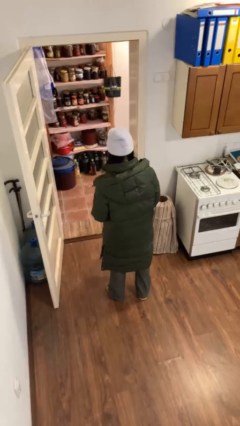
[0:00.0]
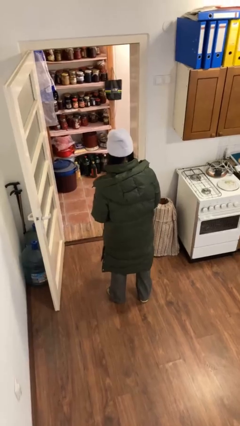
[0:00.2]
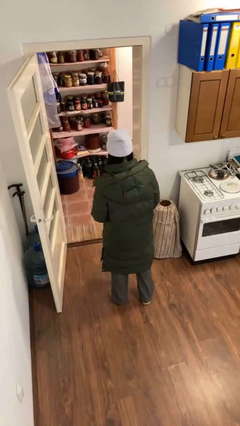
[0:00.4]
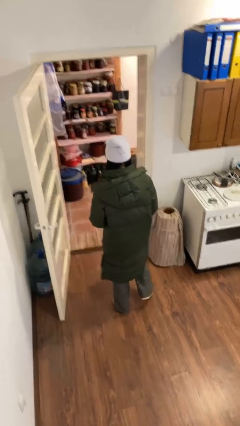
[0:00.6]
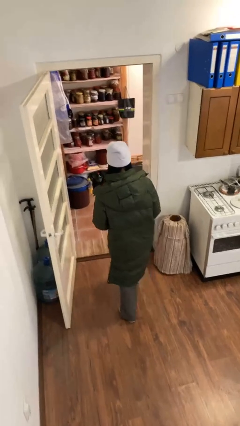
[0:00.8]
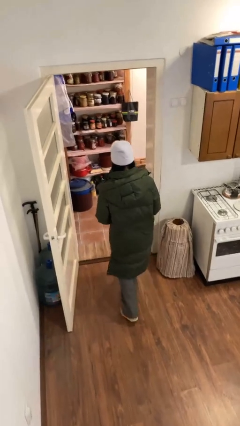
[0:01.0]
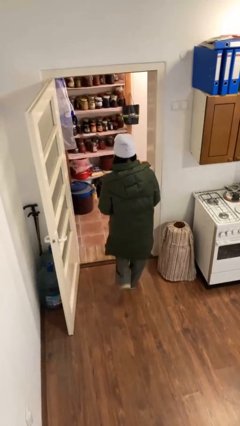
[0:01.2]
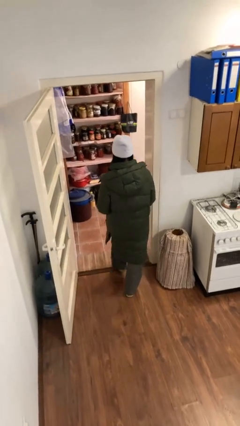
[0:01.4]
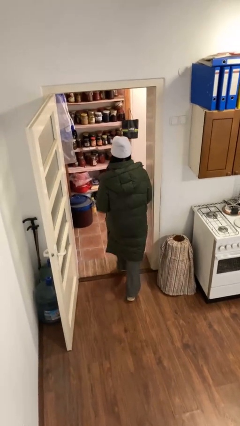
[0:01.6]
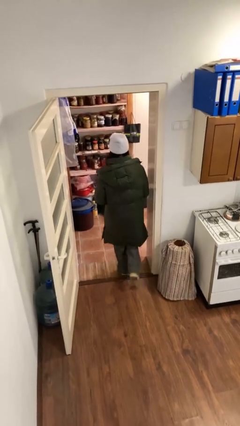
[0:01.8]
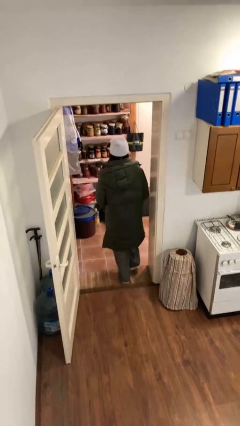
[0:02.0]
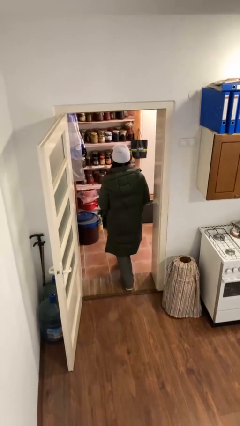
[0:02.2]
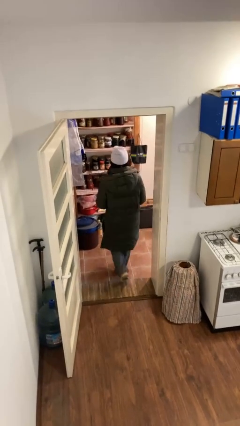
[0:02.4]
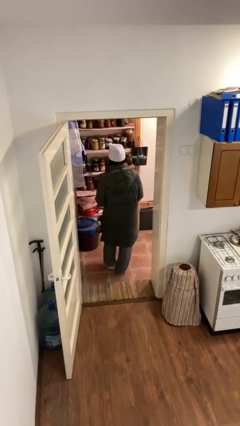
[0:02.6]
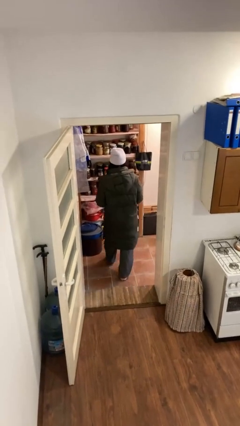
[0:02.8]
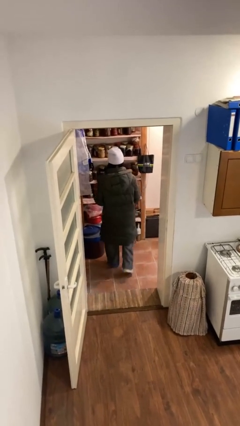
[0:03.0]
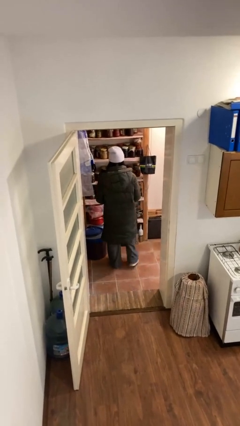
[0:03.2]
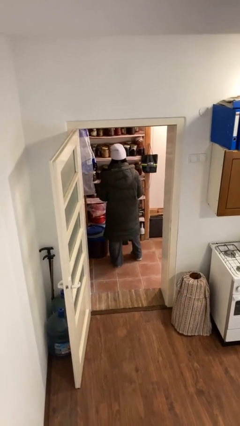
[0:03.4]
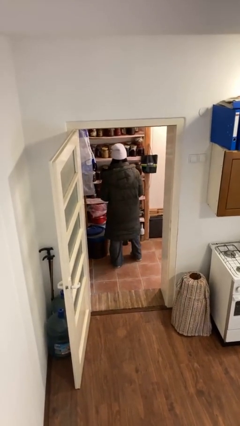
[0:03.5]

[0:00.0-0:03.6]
person exits scene through structure

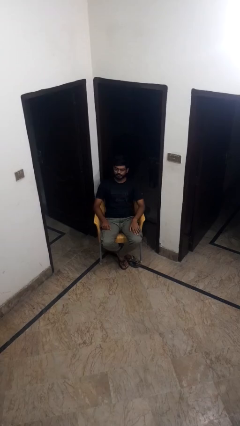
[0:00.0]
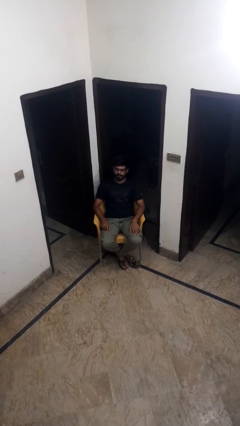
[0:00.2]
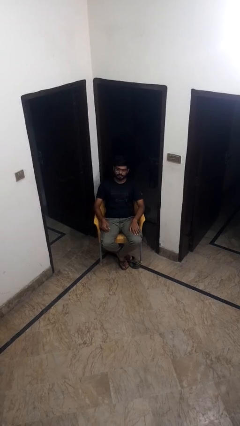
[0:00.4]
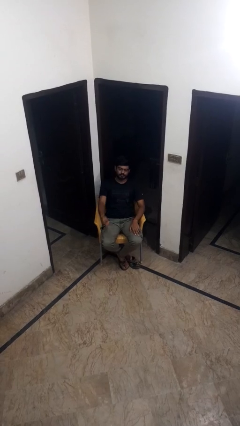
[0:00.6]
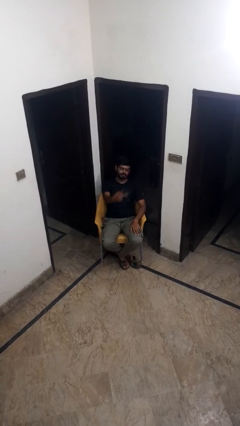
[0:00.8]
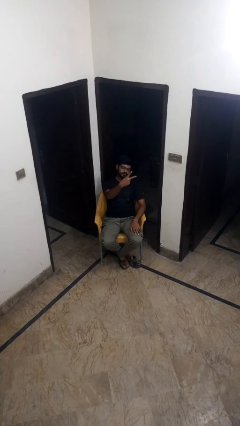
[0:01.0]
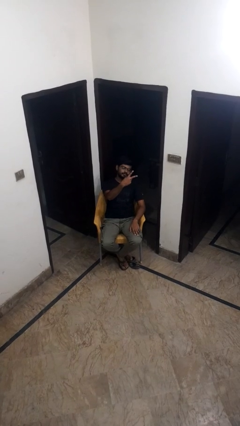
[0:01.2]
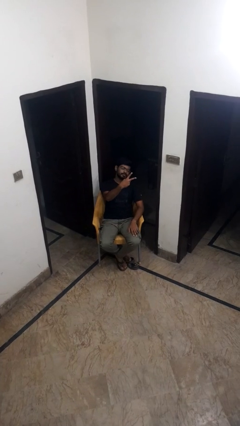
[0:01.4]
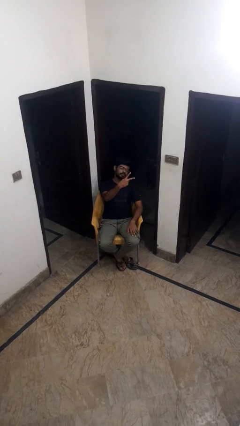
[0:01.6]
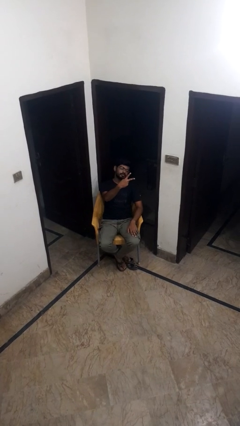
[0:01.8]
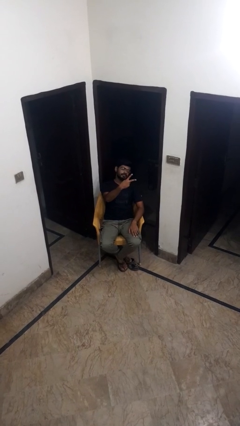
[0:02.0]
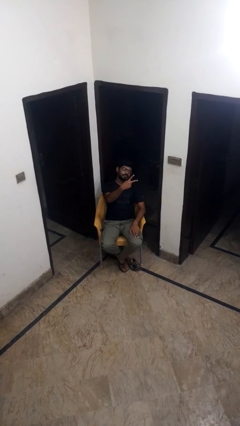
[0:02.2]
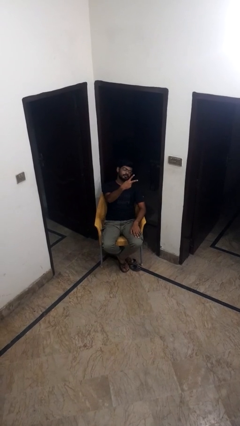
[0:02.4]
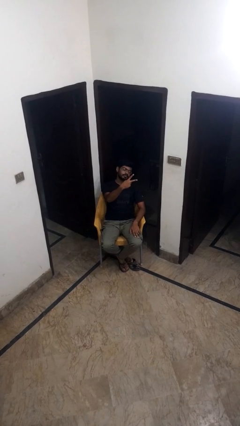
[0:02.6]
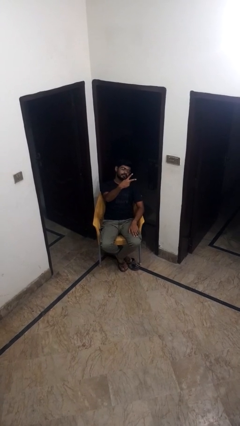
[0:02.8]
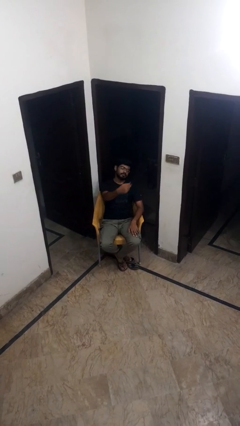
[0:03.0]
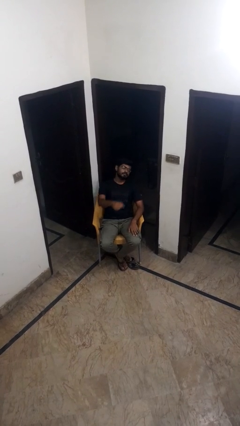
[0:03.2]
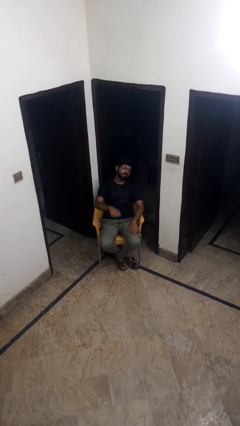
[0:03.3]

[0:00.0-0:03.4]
person gestures peace

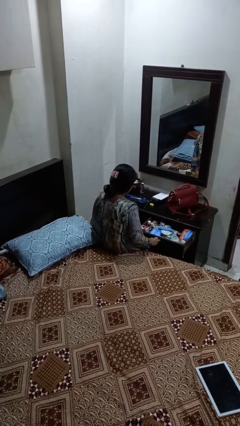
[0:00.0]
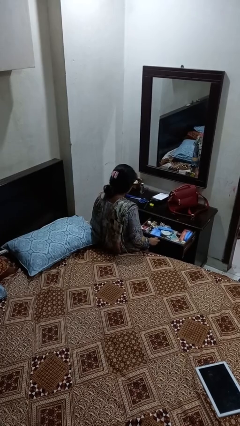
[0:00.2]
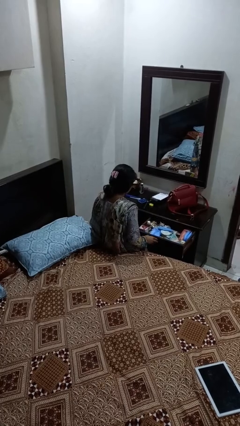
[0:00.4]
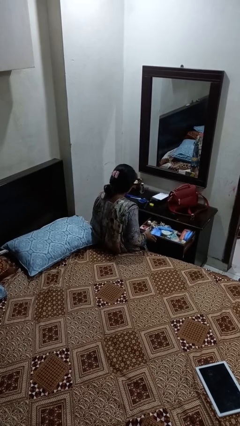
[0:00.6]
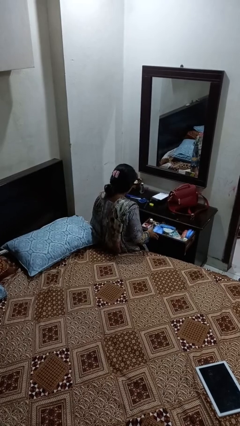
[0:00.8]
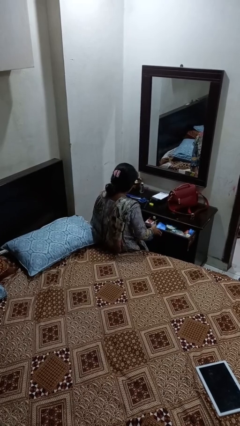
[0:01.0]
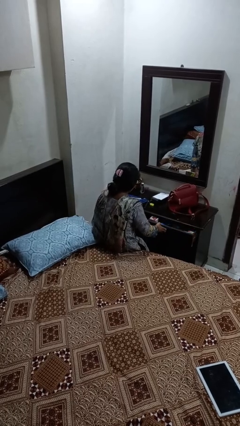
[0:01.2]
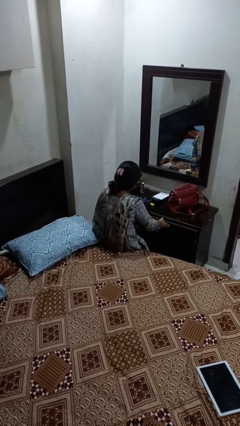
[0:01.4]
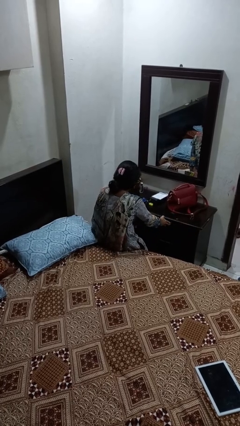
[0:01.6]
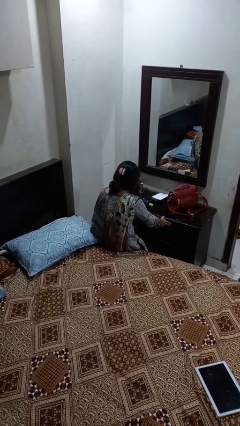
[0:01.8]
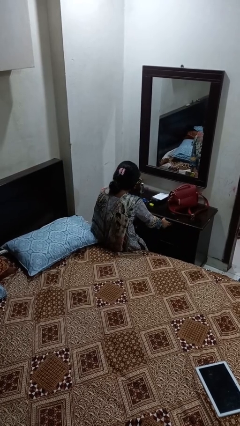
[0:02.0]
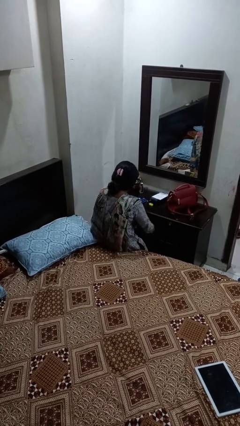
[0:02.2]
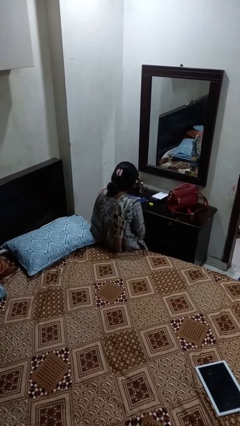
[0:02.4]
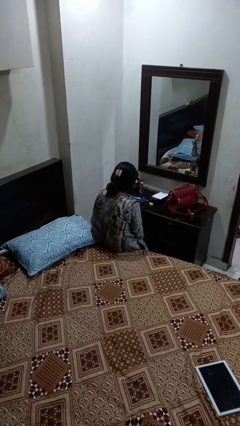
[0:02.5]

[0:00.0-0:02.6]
person closes dresser drawer

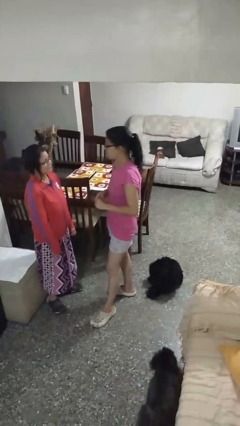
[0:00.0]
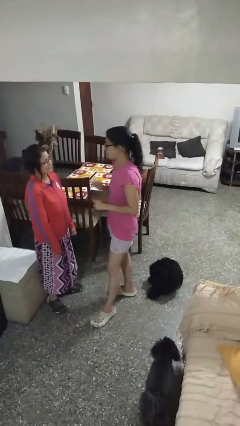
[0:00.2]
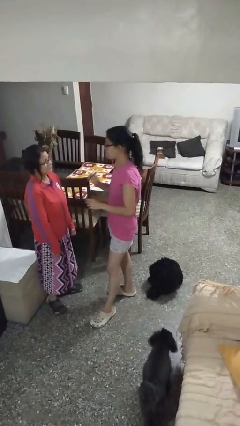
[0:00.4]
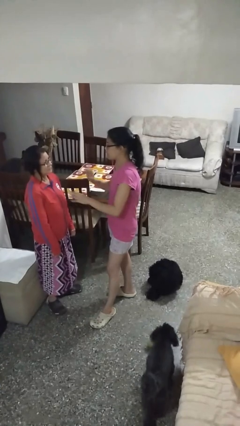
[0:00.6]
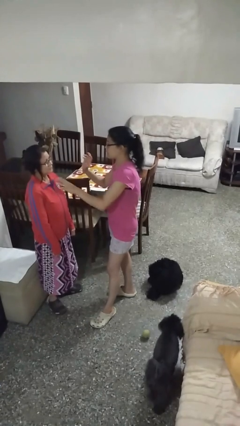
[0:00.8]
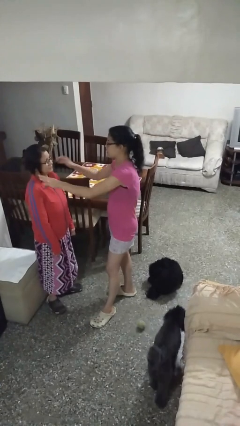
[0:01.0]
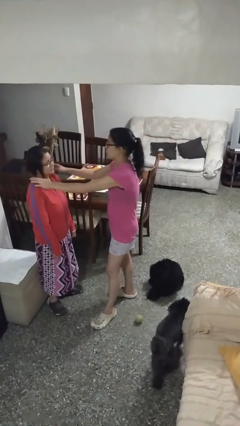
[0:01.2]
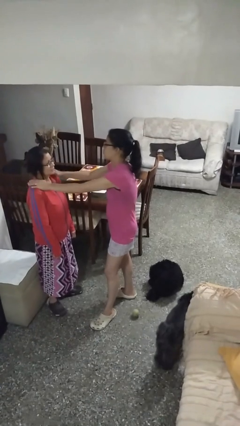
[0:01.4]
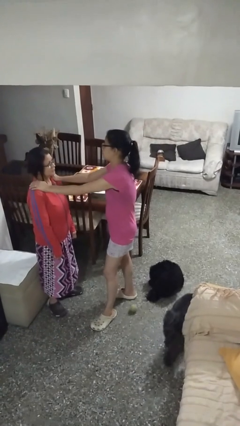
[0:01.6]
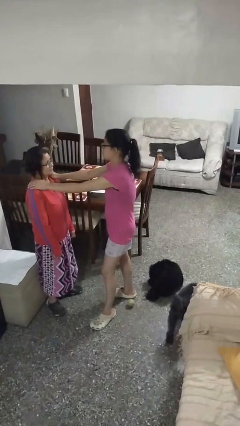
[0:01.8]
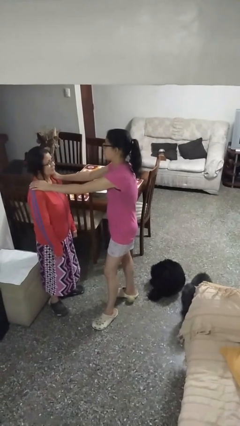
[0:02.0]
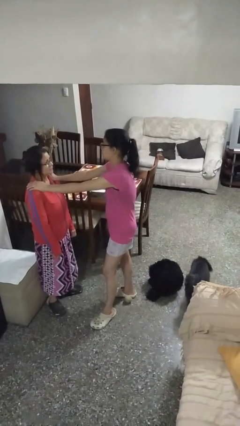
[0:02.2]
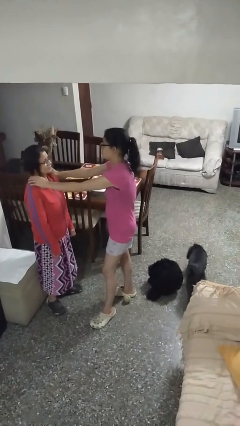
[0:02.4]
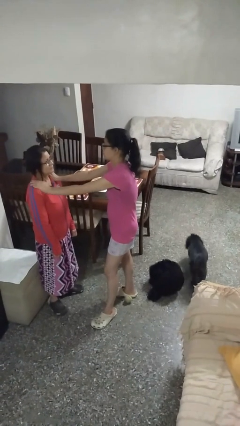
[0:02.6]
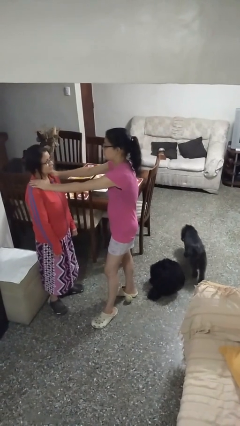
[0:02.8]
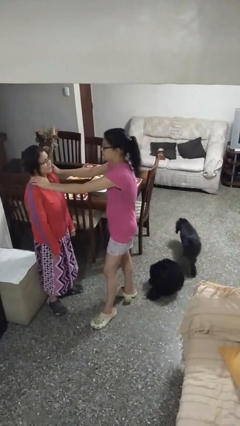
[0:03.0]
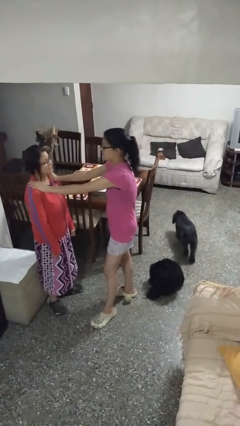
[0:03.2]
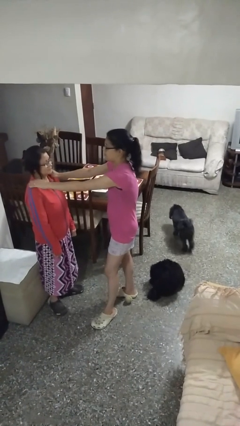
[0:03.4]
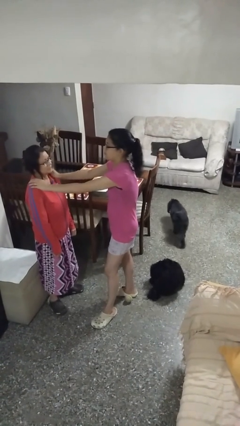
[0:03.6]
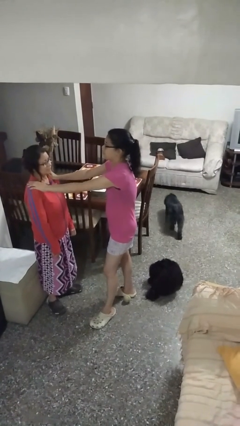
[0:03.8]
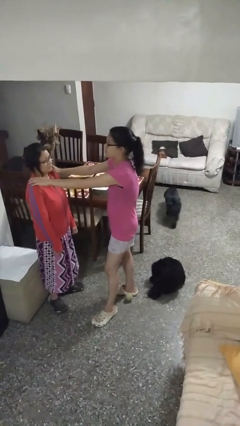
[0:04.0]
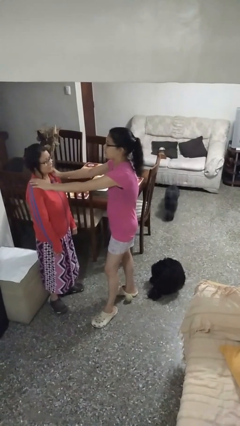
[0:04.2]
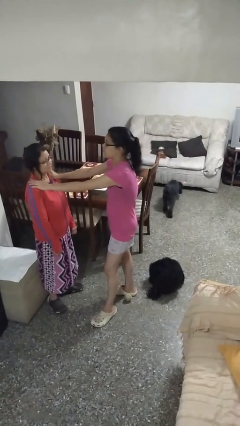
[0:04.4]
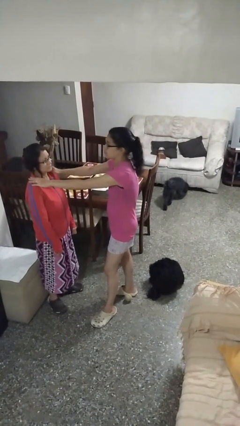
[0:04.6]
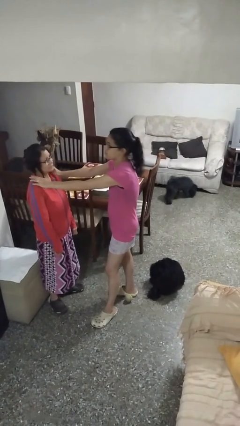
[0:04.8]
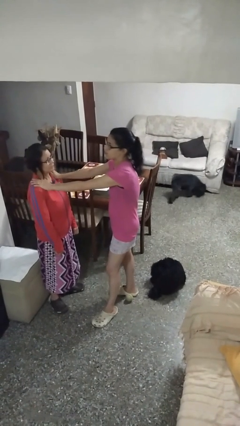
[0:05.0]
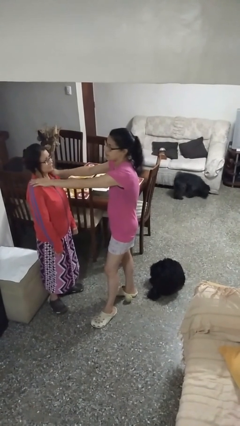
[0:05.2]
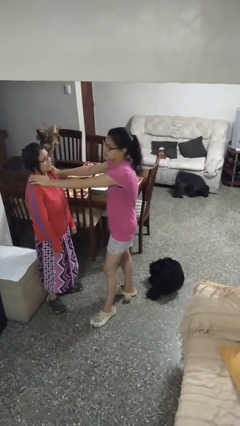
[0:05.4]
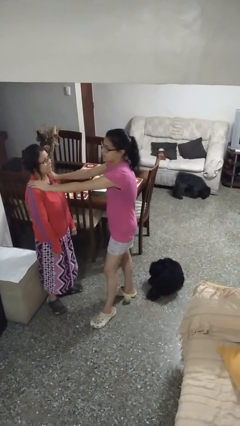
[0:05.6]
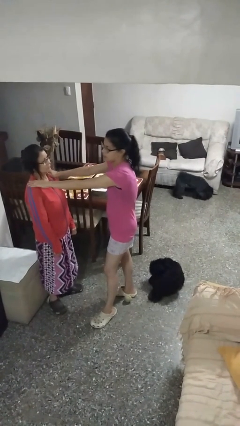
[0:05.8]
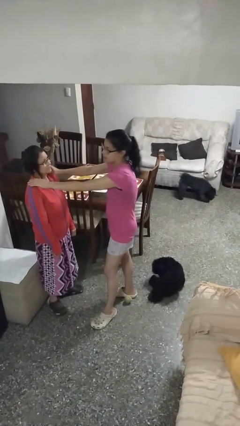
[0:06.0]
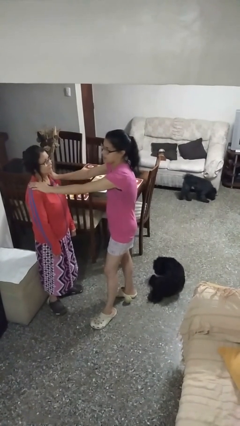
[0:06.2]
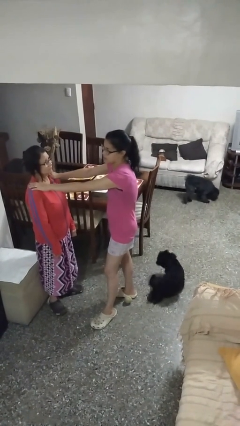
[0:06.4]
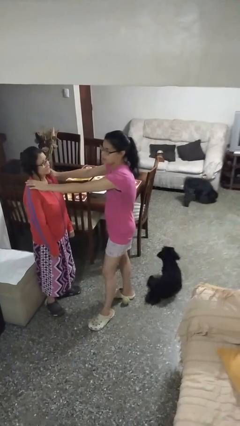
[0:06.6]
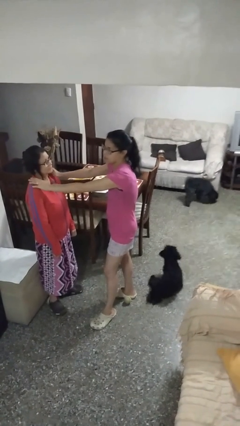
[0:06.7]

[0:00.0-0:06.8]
person pounds shoulders of person

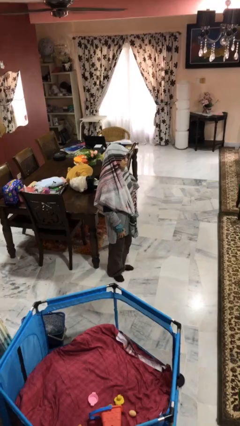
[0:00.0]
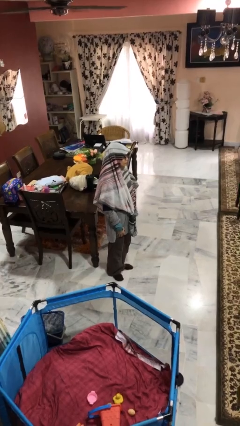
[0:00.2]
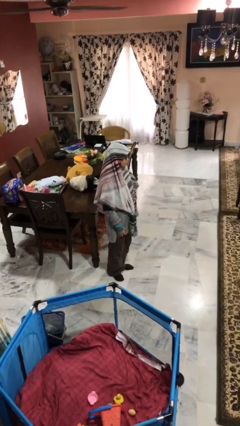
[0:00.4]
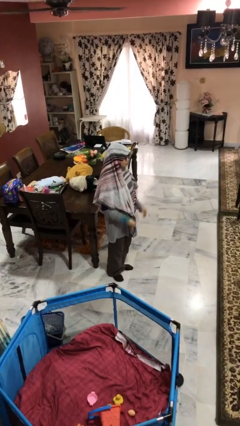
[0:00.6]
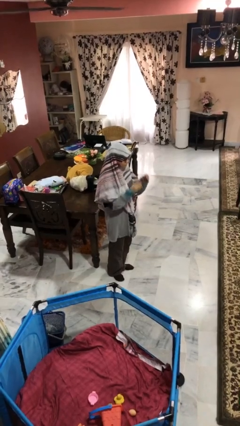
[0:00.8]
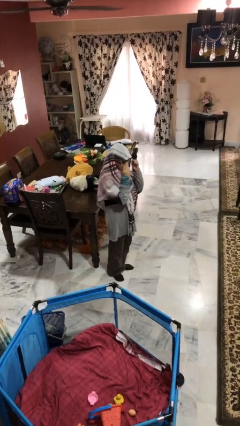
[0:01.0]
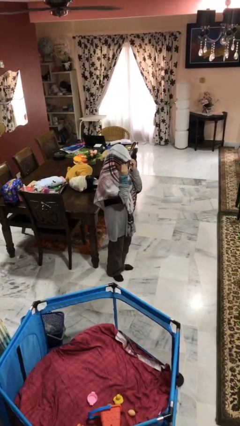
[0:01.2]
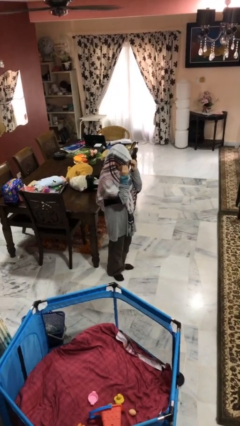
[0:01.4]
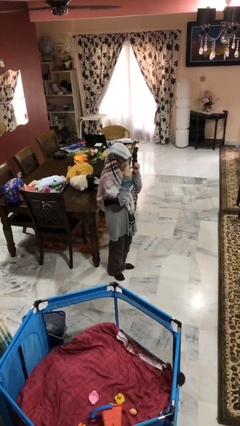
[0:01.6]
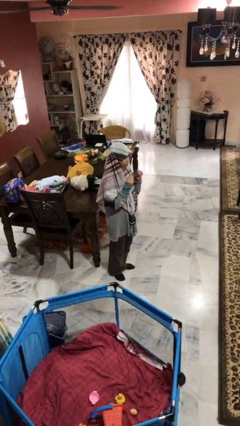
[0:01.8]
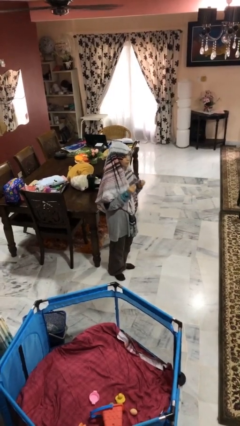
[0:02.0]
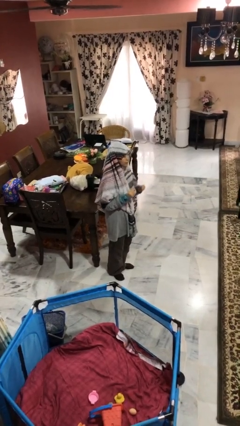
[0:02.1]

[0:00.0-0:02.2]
person takes off glasses
